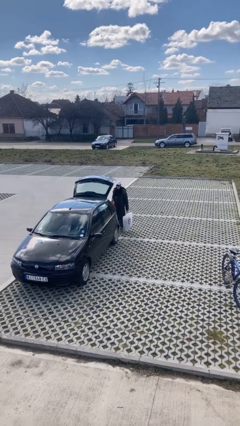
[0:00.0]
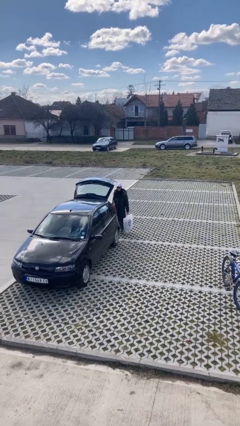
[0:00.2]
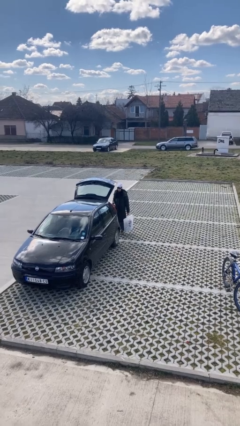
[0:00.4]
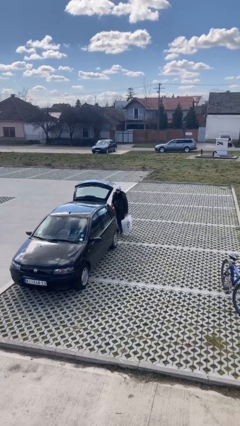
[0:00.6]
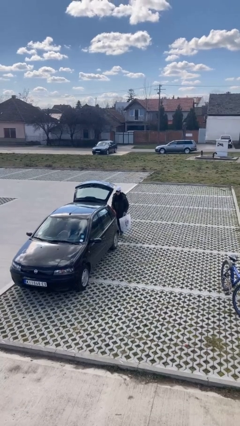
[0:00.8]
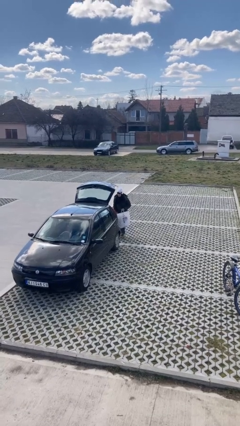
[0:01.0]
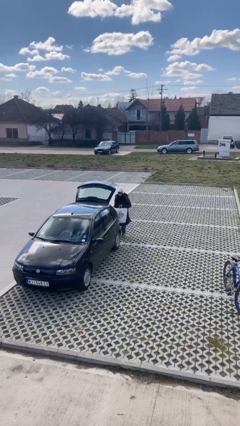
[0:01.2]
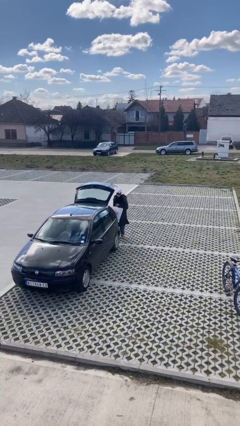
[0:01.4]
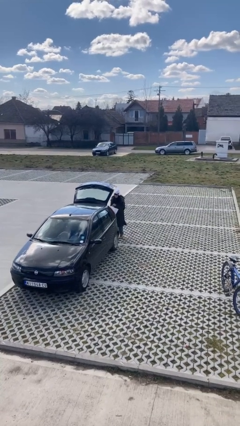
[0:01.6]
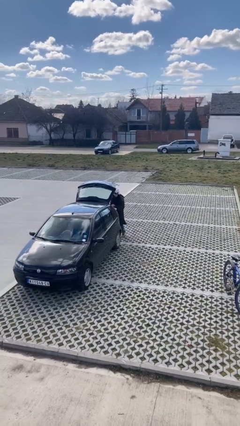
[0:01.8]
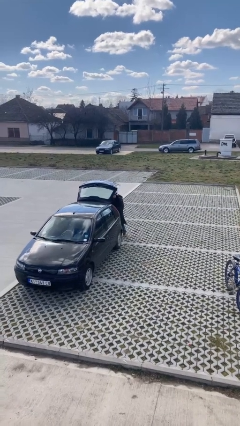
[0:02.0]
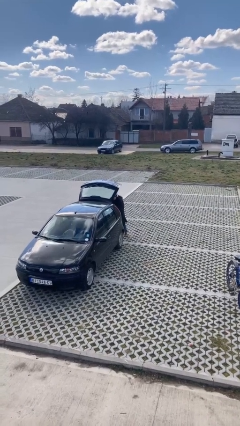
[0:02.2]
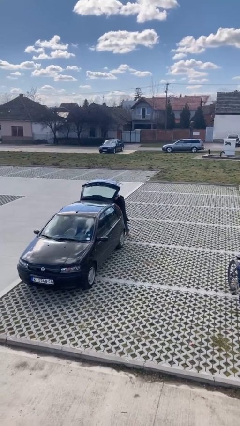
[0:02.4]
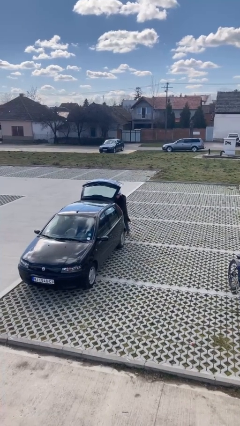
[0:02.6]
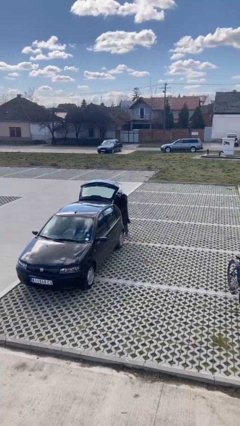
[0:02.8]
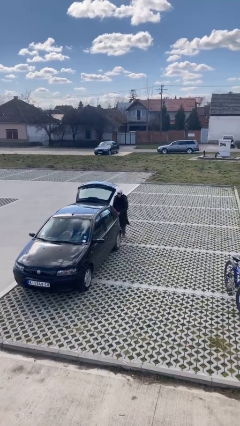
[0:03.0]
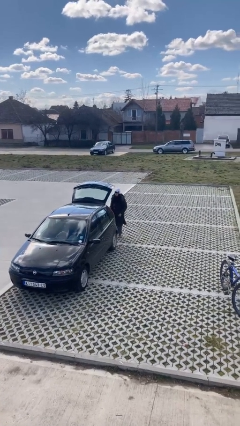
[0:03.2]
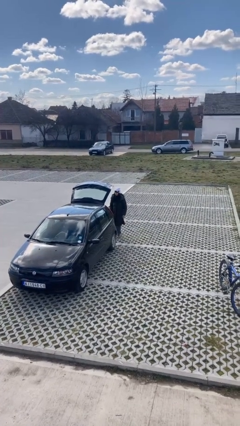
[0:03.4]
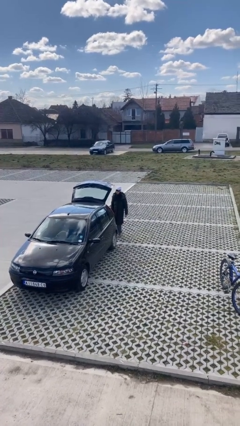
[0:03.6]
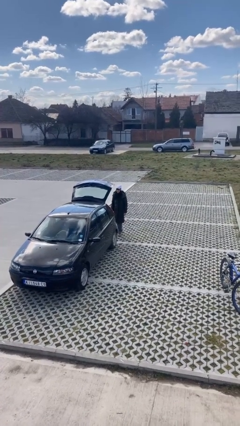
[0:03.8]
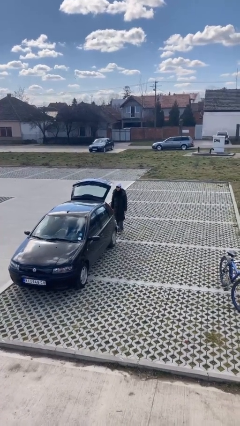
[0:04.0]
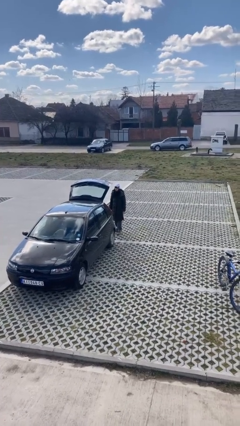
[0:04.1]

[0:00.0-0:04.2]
person loads car

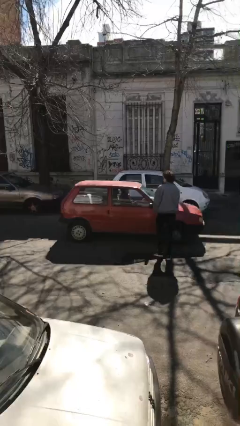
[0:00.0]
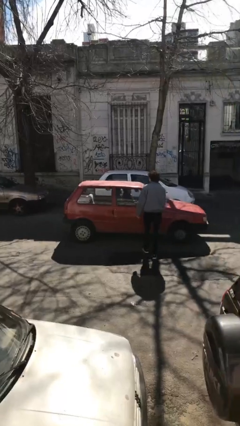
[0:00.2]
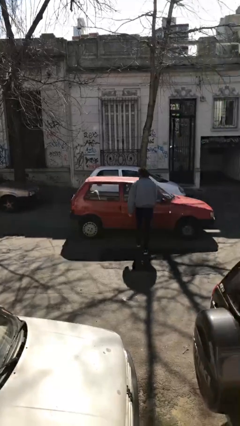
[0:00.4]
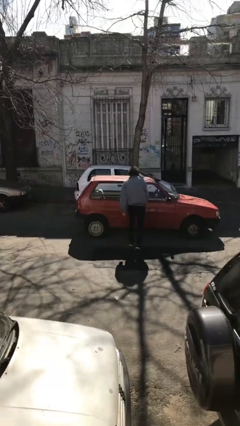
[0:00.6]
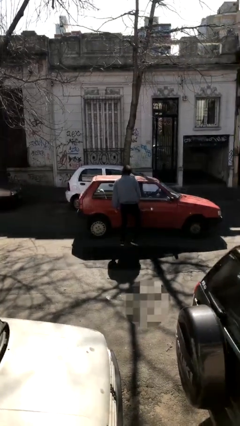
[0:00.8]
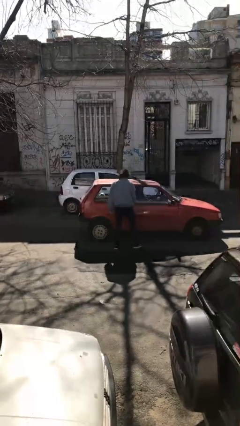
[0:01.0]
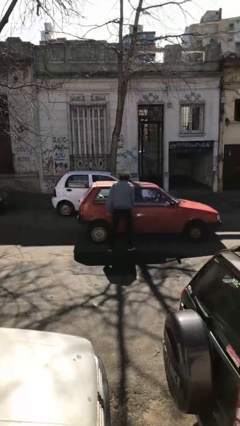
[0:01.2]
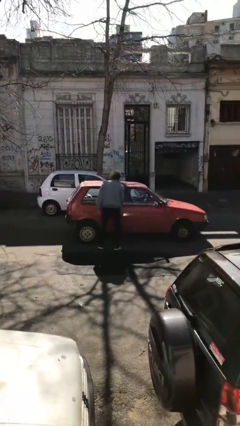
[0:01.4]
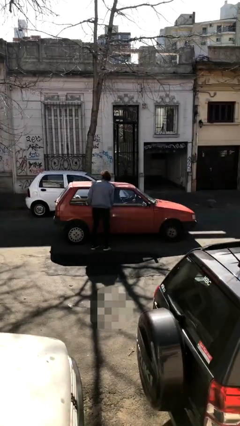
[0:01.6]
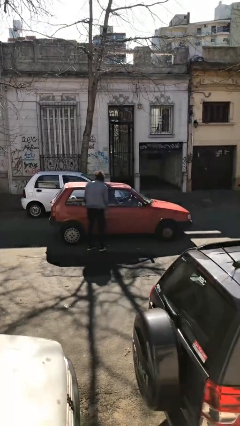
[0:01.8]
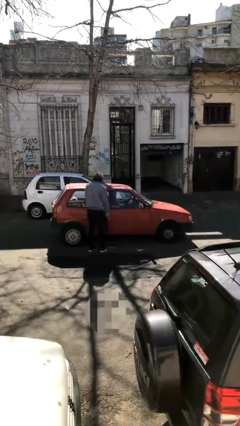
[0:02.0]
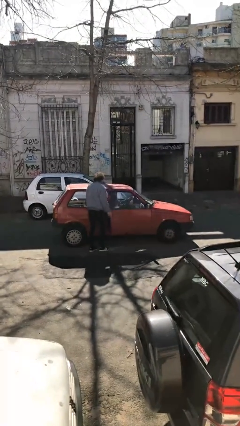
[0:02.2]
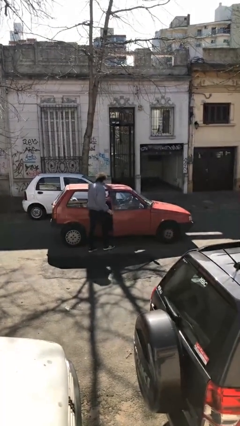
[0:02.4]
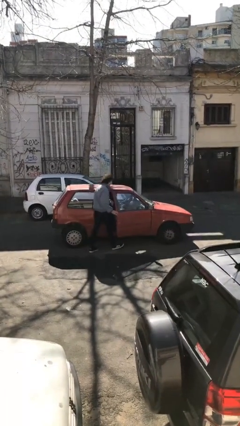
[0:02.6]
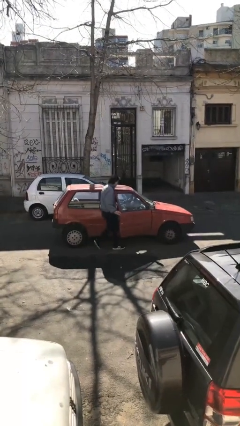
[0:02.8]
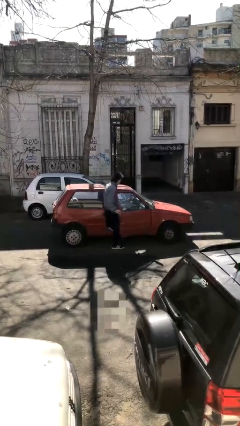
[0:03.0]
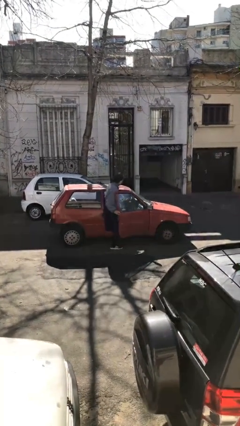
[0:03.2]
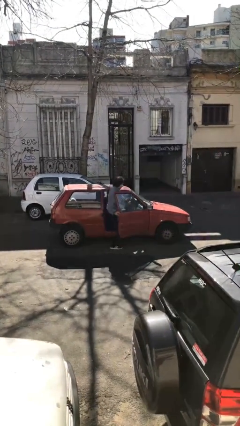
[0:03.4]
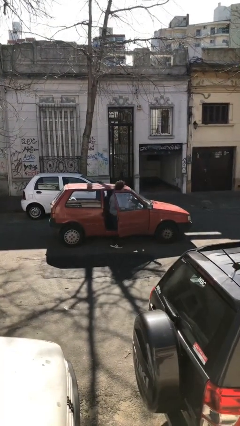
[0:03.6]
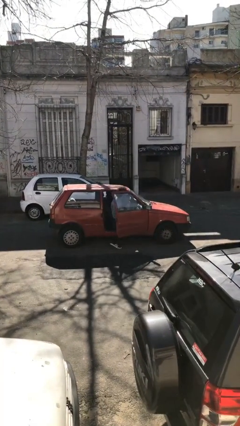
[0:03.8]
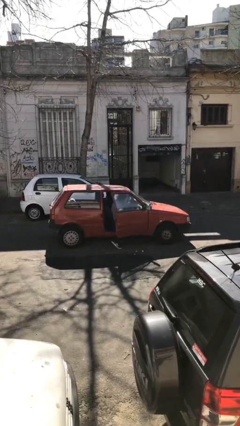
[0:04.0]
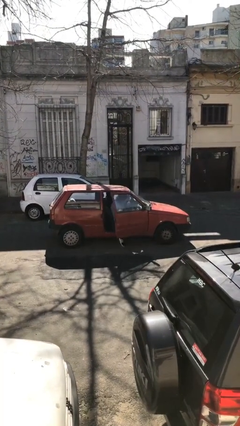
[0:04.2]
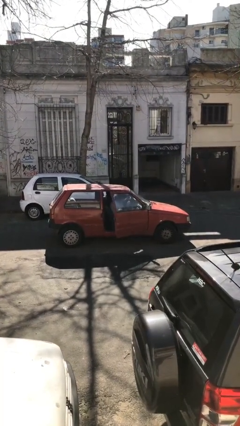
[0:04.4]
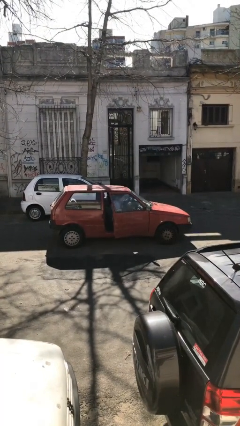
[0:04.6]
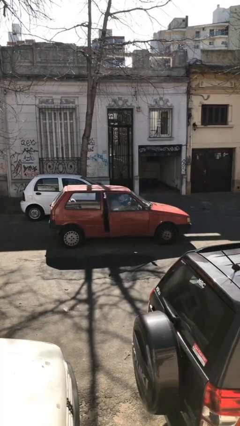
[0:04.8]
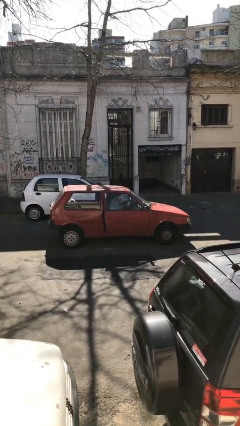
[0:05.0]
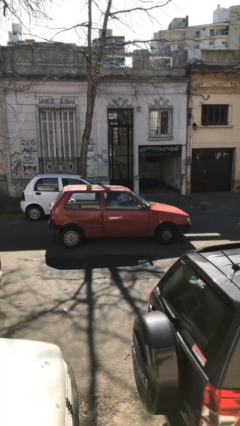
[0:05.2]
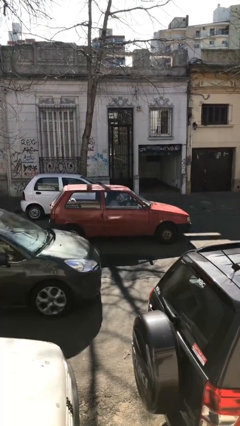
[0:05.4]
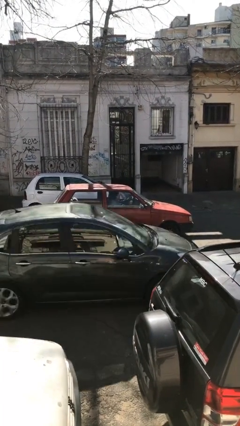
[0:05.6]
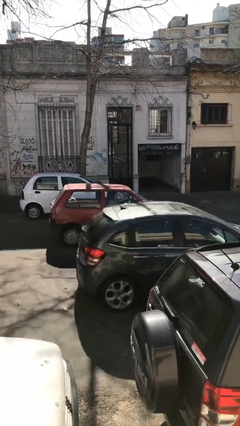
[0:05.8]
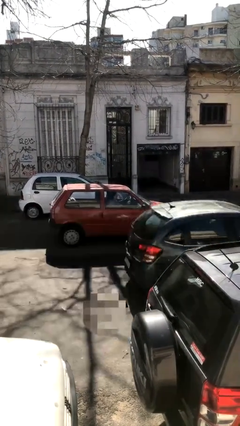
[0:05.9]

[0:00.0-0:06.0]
car picks up person

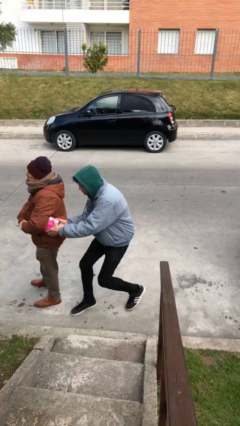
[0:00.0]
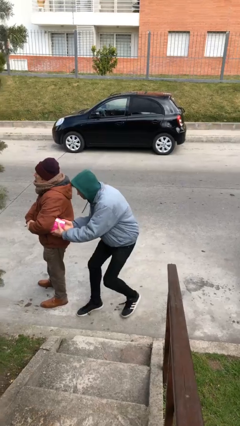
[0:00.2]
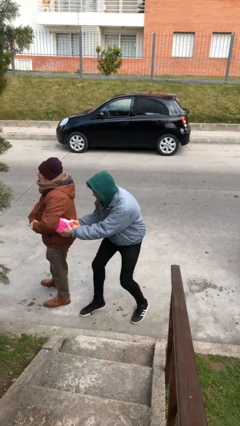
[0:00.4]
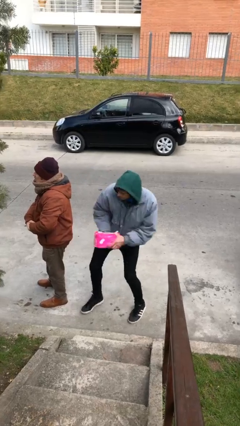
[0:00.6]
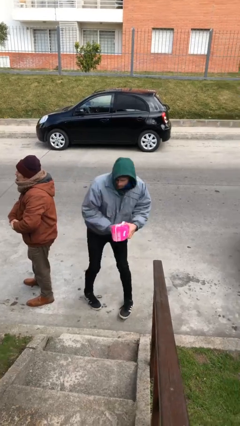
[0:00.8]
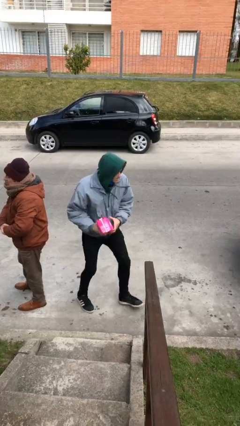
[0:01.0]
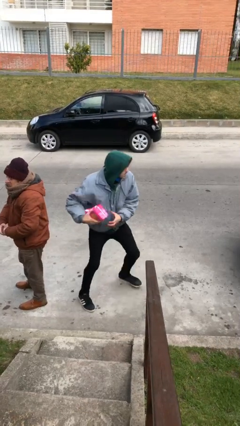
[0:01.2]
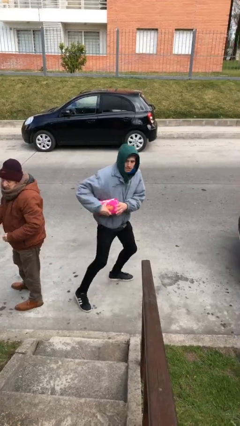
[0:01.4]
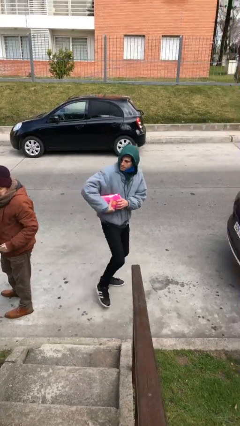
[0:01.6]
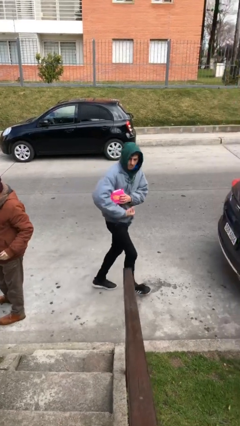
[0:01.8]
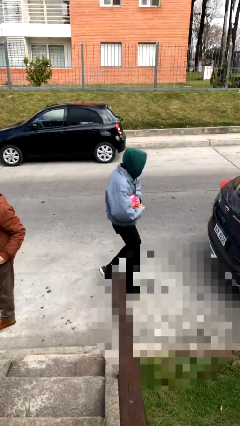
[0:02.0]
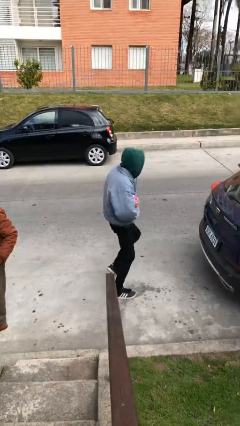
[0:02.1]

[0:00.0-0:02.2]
person steals object from person

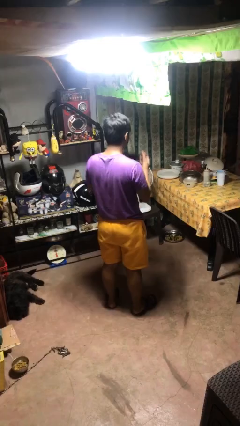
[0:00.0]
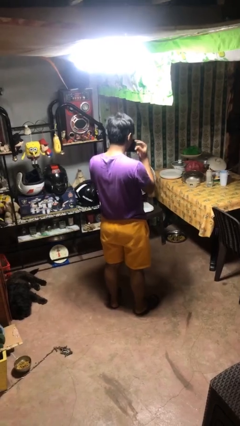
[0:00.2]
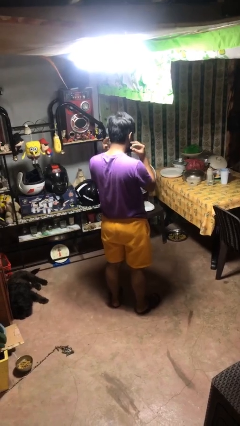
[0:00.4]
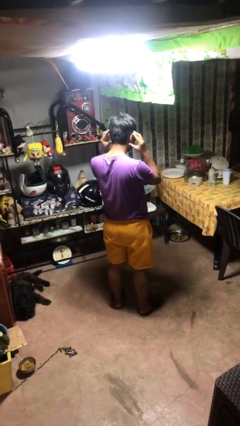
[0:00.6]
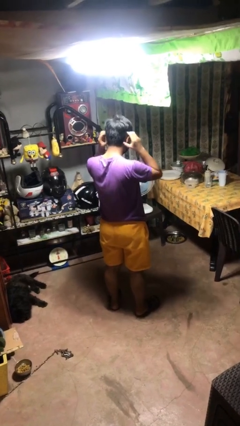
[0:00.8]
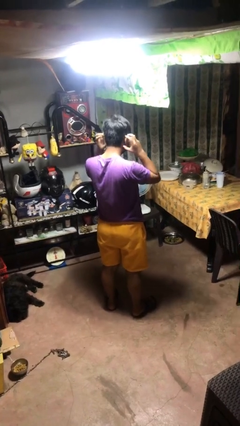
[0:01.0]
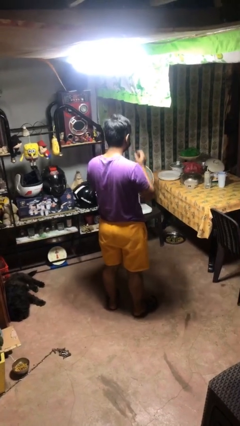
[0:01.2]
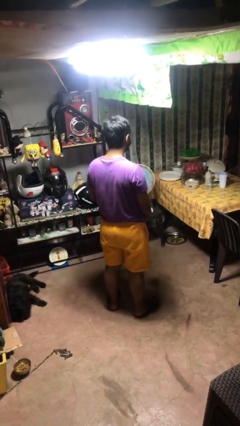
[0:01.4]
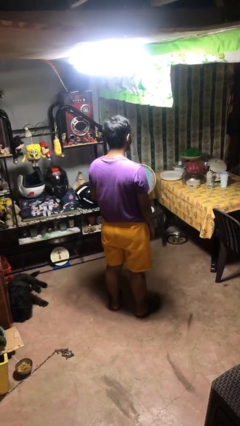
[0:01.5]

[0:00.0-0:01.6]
person puts on facemask

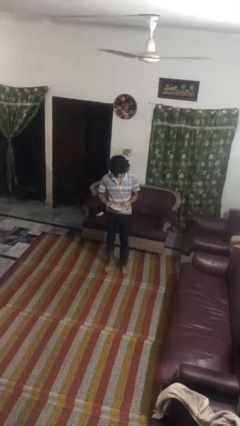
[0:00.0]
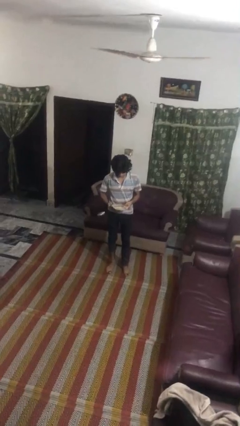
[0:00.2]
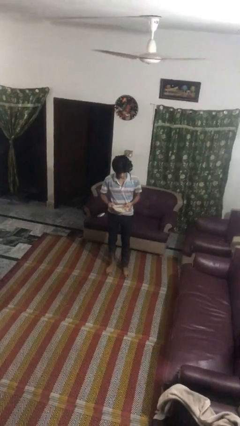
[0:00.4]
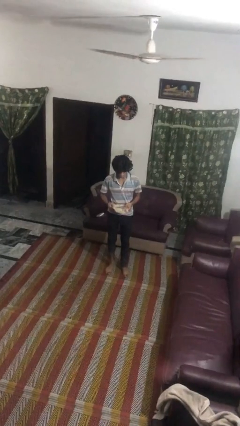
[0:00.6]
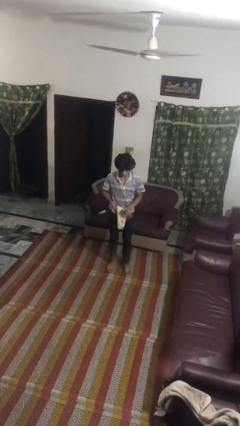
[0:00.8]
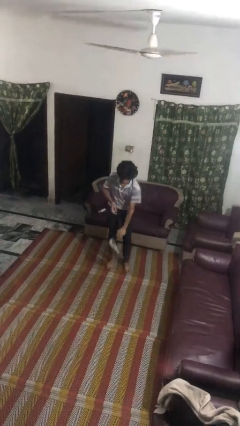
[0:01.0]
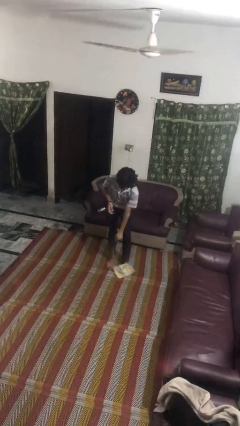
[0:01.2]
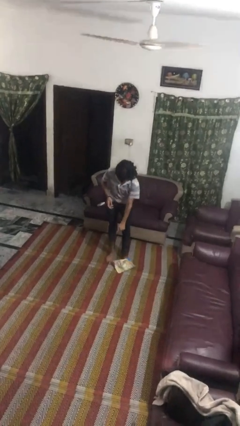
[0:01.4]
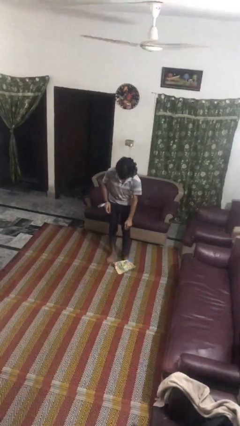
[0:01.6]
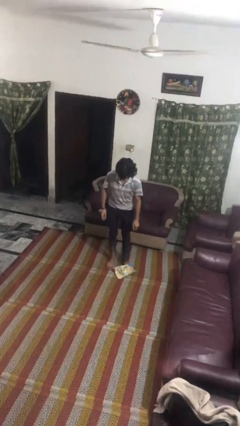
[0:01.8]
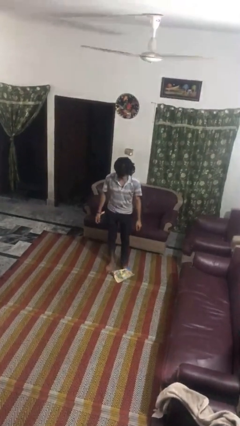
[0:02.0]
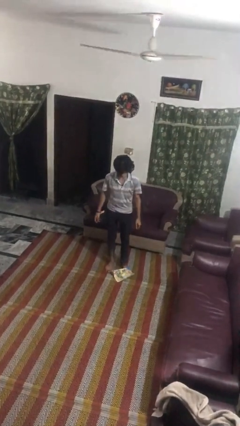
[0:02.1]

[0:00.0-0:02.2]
person drops object

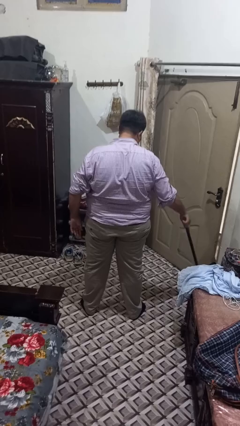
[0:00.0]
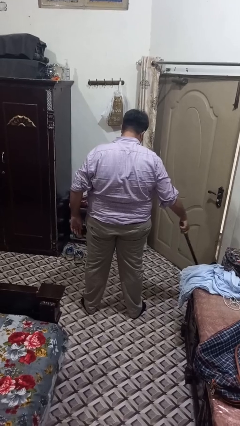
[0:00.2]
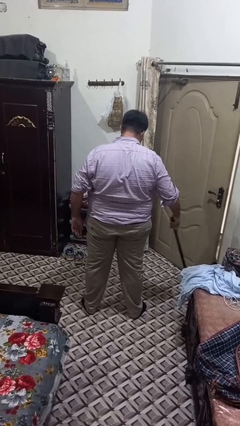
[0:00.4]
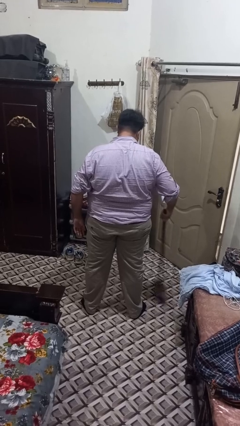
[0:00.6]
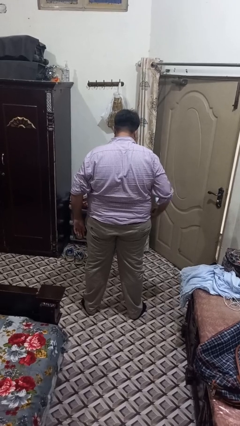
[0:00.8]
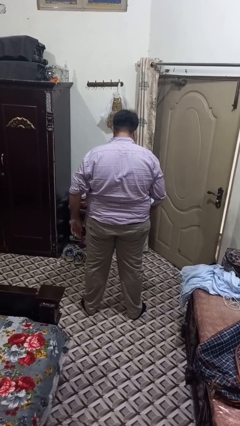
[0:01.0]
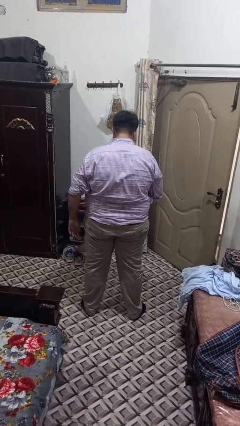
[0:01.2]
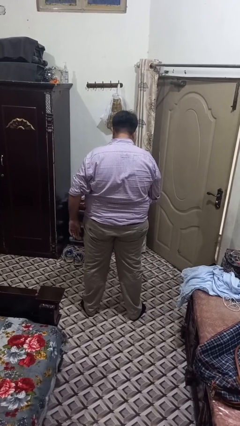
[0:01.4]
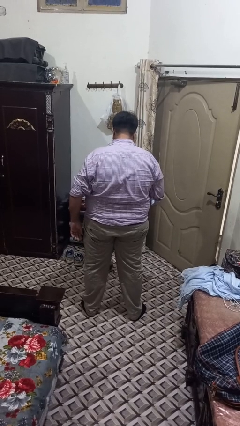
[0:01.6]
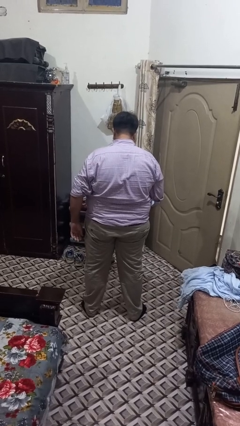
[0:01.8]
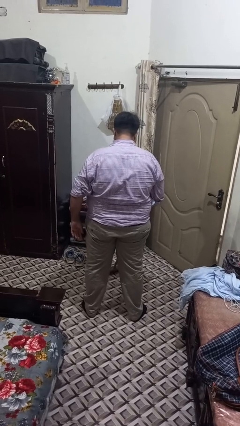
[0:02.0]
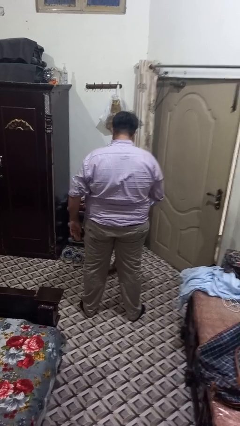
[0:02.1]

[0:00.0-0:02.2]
person sweeps floor
